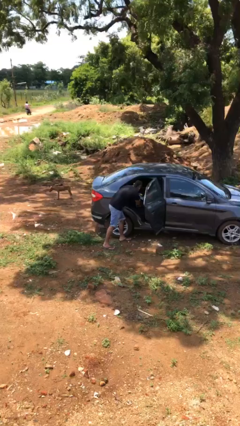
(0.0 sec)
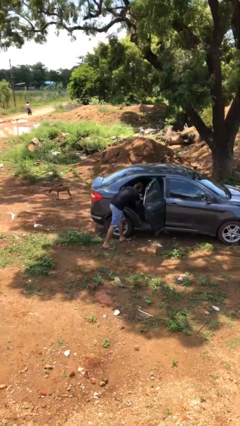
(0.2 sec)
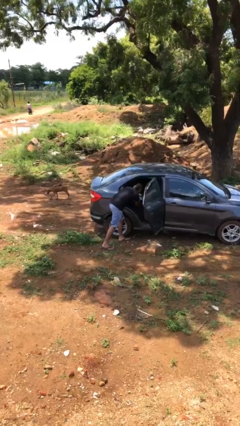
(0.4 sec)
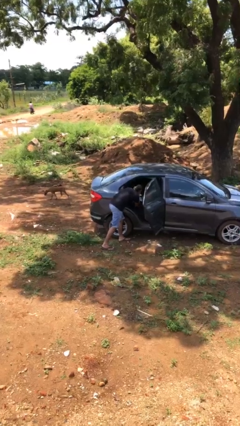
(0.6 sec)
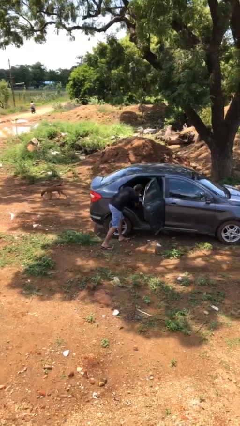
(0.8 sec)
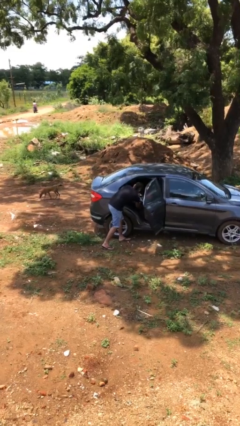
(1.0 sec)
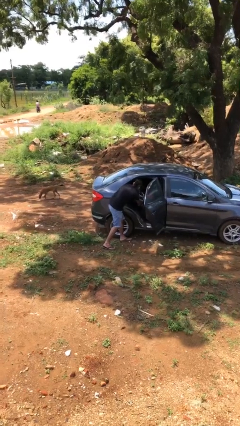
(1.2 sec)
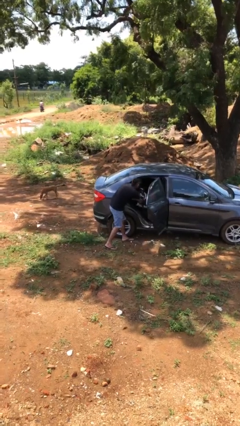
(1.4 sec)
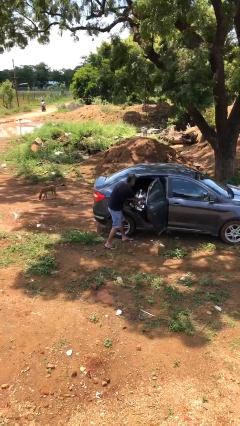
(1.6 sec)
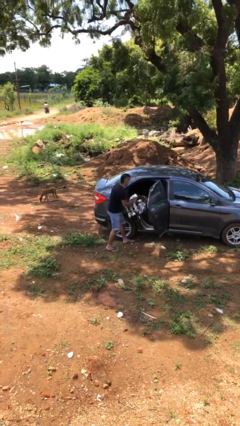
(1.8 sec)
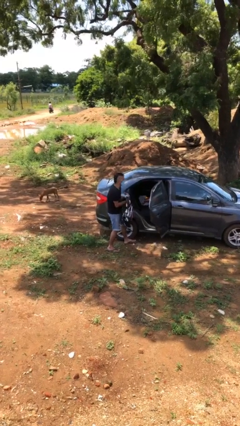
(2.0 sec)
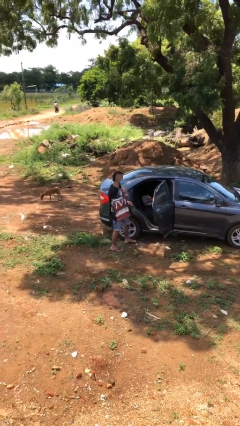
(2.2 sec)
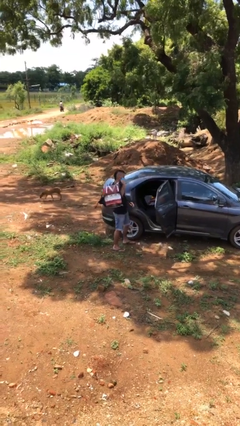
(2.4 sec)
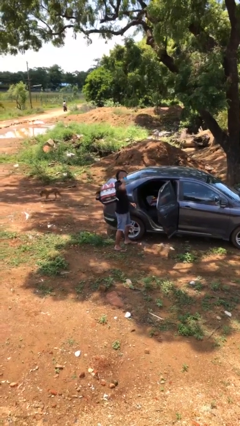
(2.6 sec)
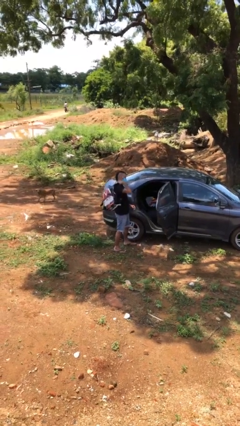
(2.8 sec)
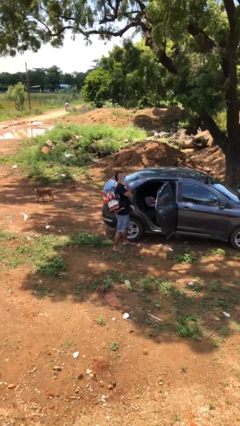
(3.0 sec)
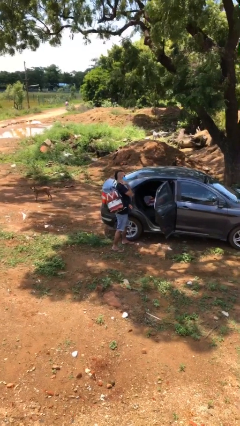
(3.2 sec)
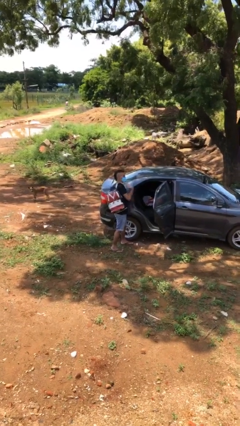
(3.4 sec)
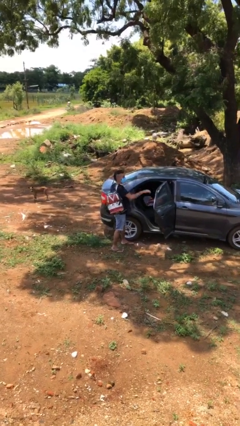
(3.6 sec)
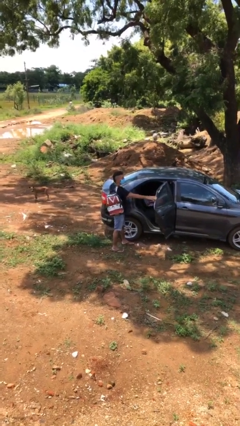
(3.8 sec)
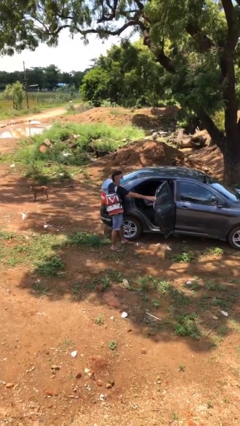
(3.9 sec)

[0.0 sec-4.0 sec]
person unloads car

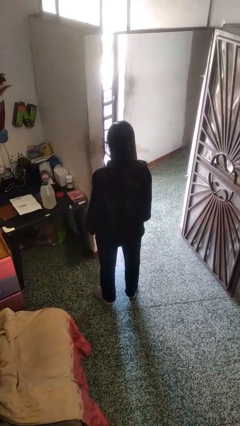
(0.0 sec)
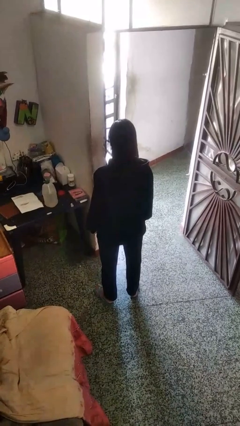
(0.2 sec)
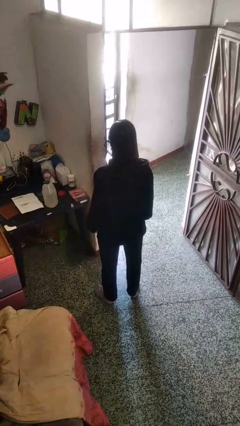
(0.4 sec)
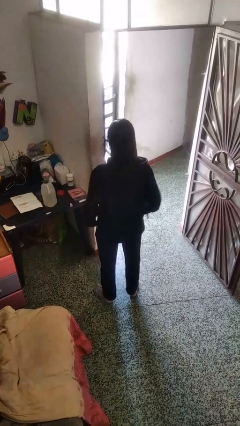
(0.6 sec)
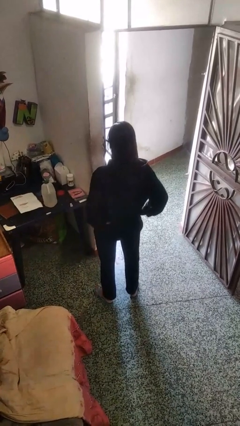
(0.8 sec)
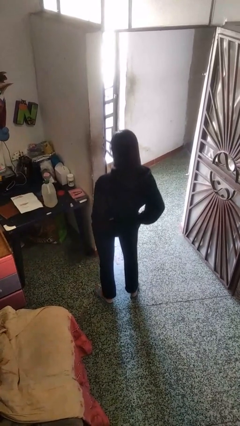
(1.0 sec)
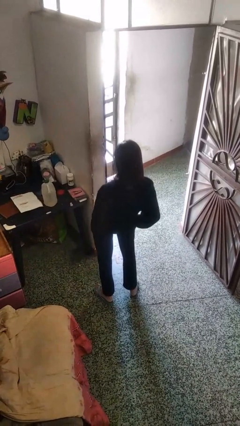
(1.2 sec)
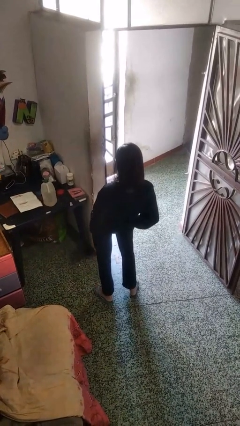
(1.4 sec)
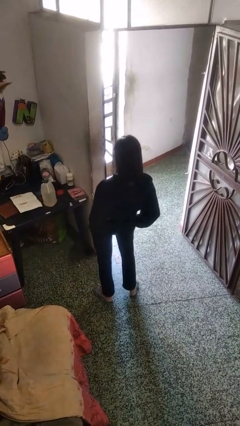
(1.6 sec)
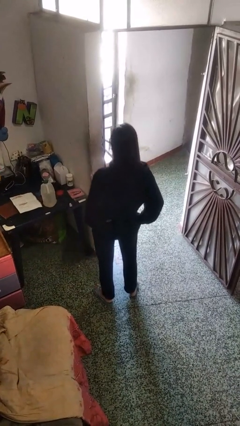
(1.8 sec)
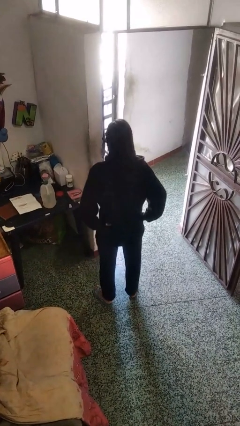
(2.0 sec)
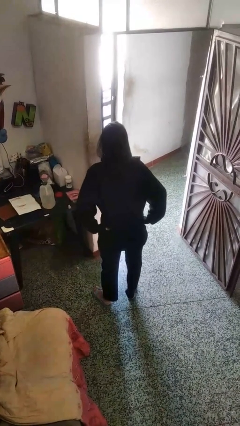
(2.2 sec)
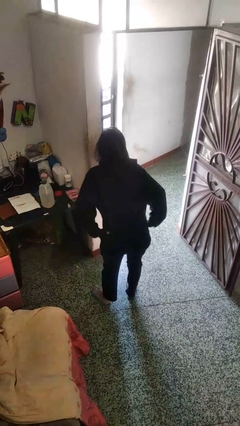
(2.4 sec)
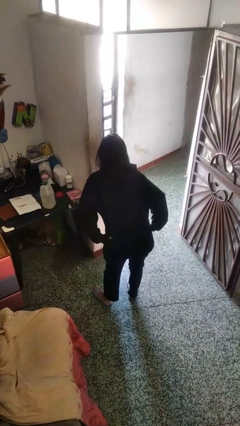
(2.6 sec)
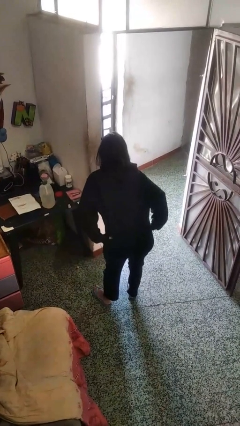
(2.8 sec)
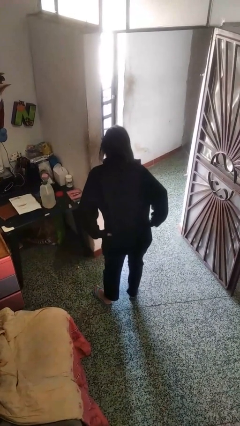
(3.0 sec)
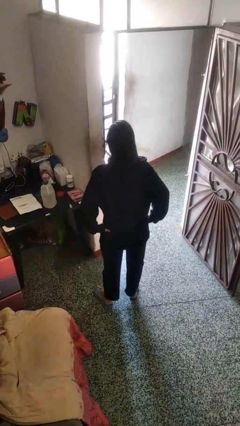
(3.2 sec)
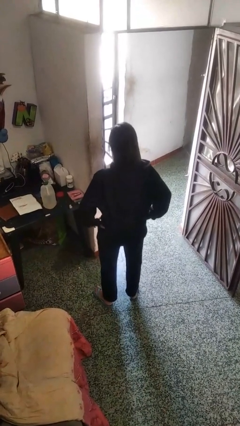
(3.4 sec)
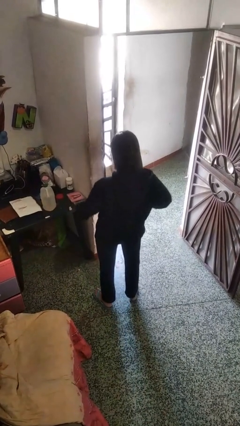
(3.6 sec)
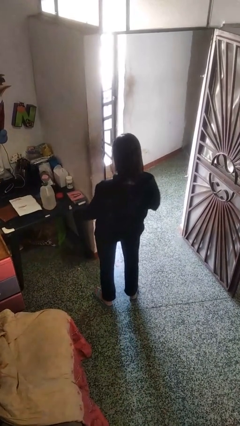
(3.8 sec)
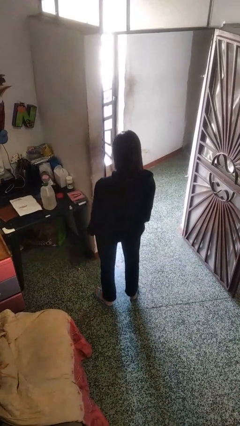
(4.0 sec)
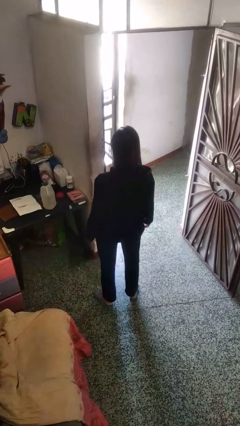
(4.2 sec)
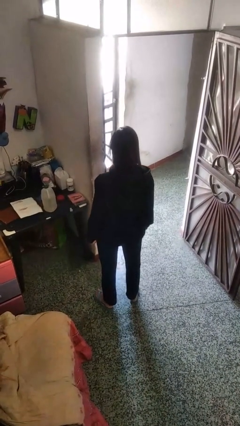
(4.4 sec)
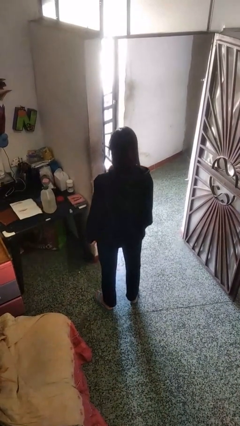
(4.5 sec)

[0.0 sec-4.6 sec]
person wiggles hips

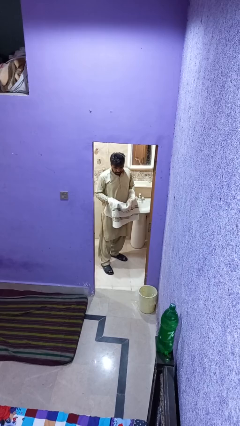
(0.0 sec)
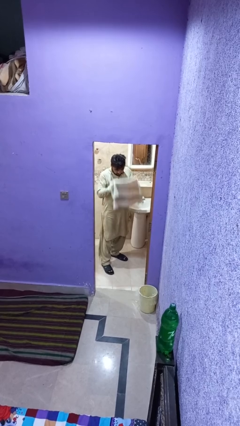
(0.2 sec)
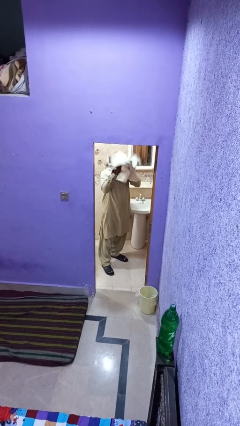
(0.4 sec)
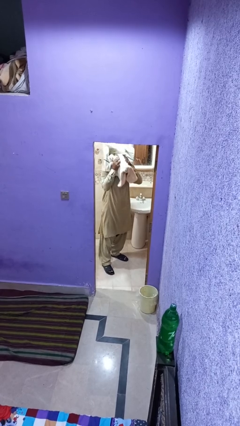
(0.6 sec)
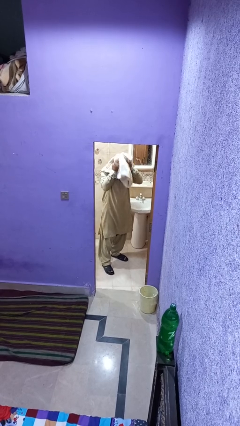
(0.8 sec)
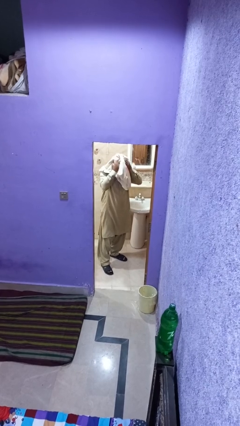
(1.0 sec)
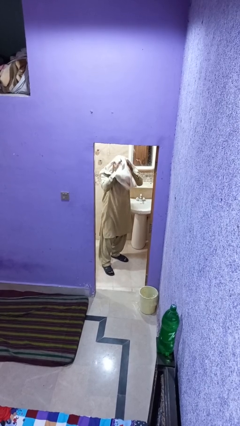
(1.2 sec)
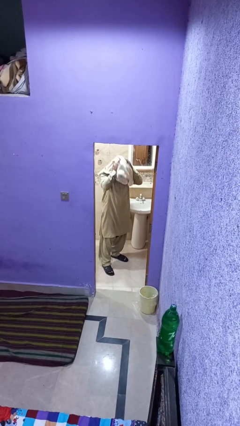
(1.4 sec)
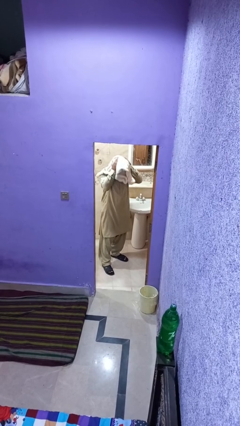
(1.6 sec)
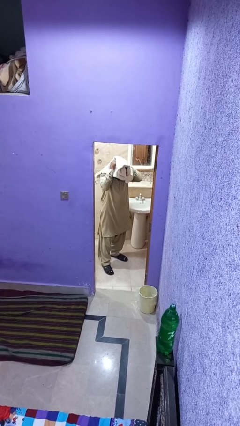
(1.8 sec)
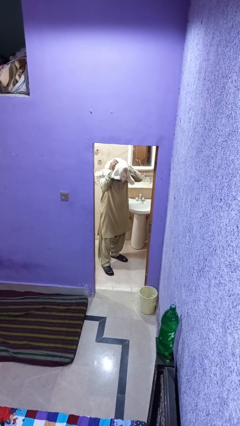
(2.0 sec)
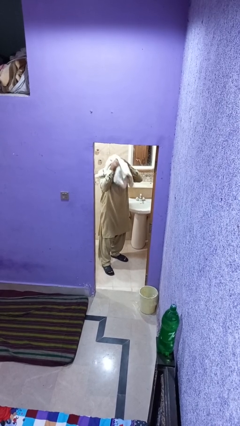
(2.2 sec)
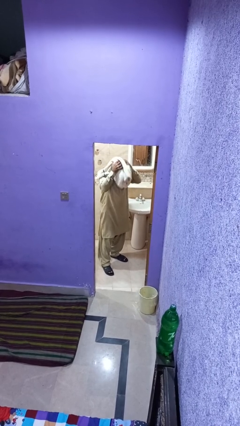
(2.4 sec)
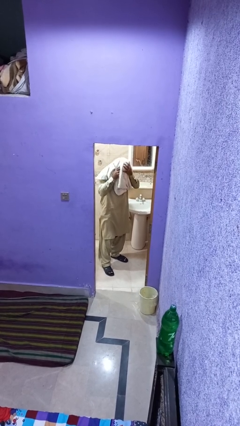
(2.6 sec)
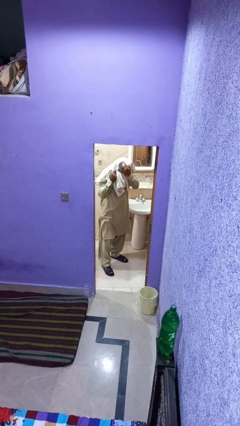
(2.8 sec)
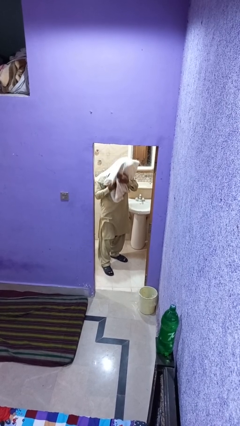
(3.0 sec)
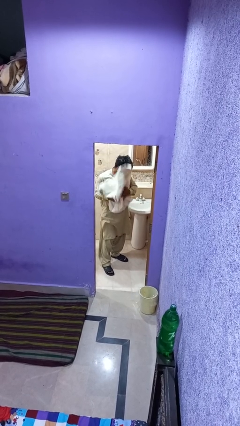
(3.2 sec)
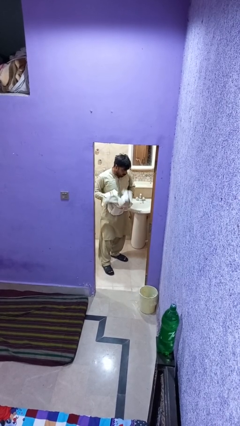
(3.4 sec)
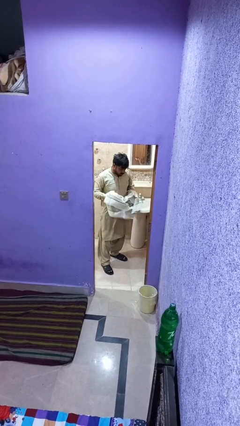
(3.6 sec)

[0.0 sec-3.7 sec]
person dries hair with towel

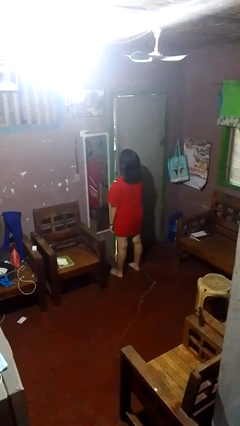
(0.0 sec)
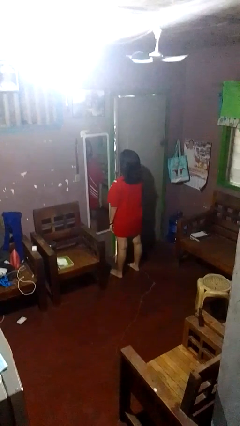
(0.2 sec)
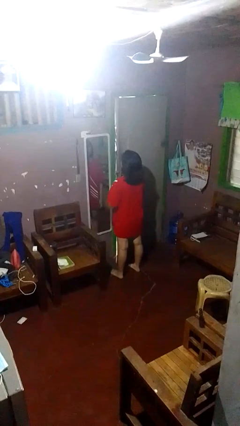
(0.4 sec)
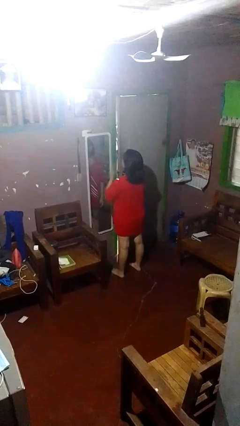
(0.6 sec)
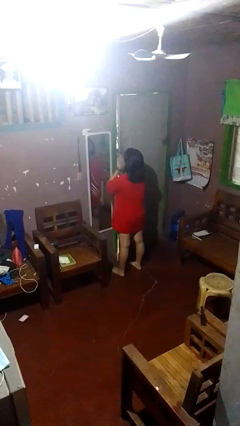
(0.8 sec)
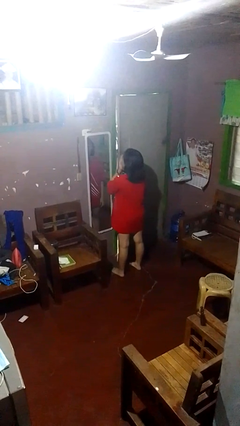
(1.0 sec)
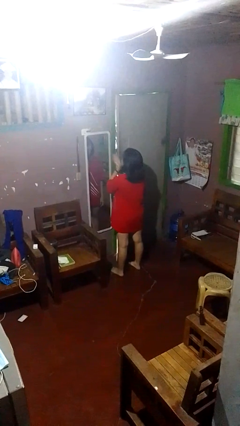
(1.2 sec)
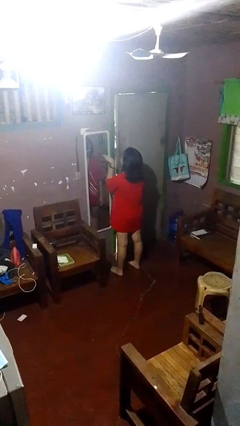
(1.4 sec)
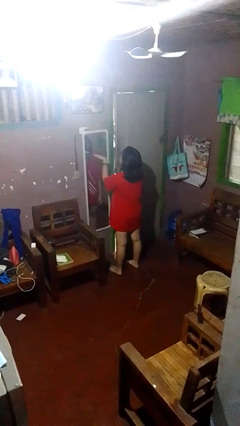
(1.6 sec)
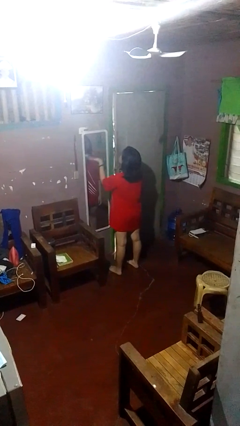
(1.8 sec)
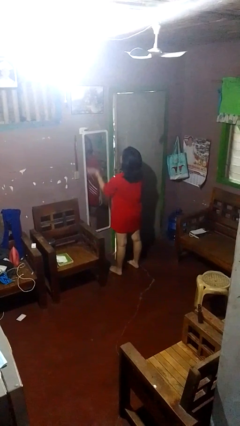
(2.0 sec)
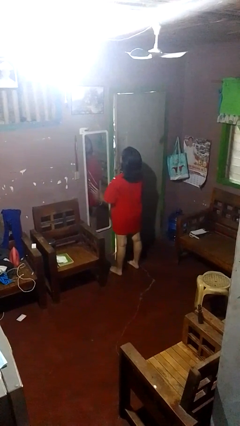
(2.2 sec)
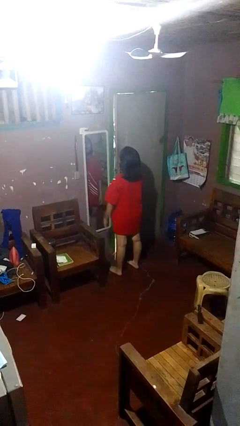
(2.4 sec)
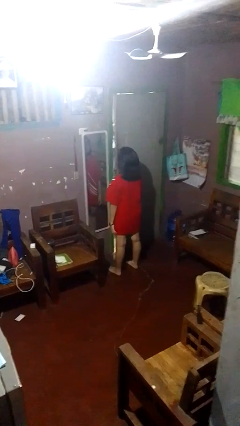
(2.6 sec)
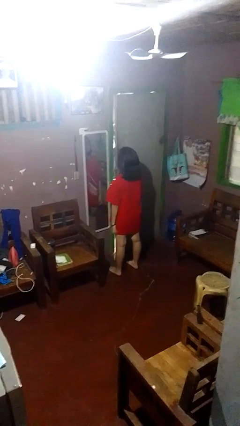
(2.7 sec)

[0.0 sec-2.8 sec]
person gestures blow kiss

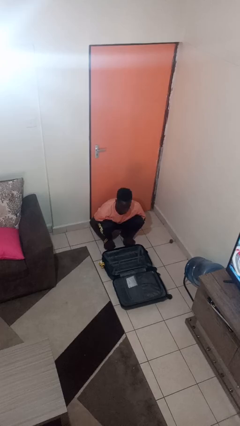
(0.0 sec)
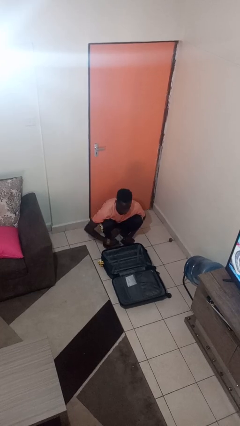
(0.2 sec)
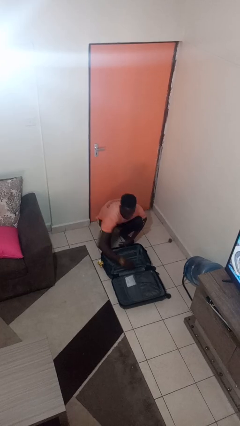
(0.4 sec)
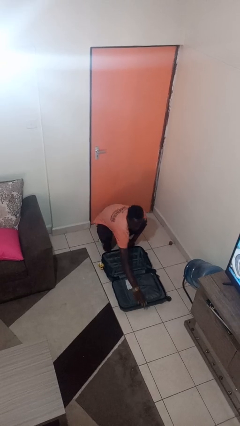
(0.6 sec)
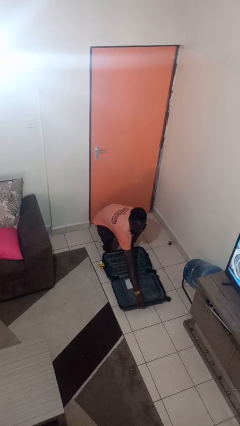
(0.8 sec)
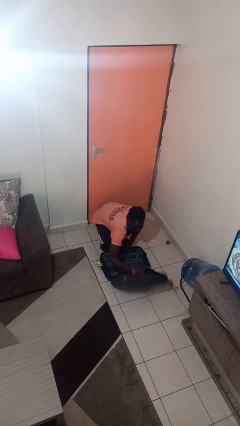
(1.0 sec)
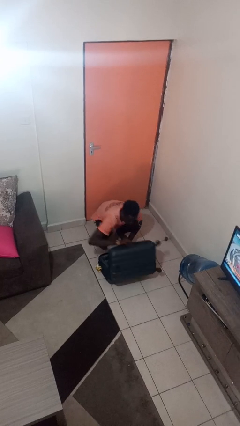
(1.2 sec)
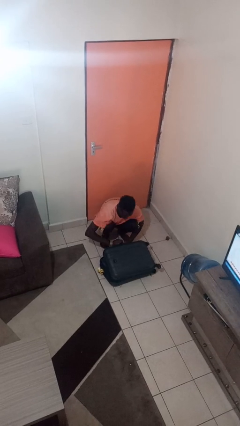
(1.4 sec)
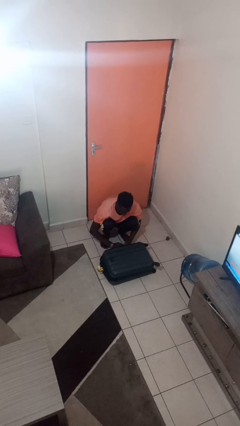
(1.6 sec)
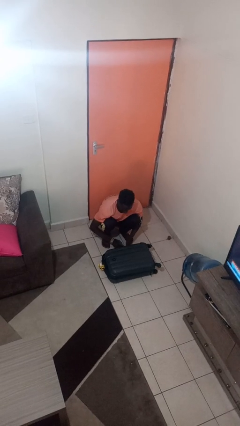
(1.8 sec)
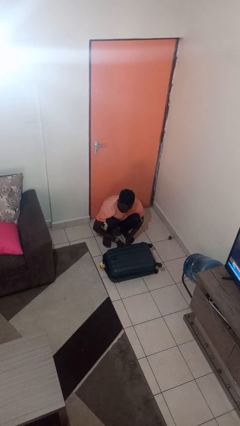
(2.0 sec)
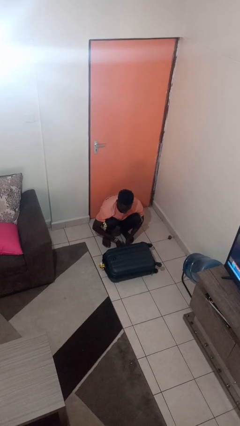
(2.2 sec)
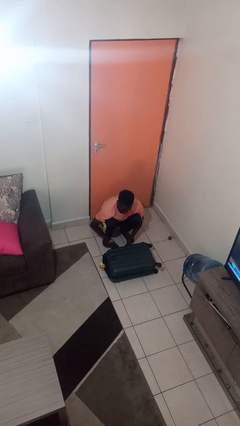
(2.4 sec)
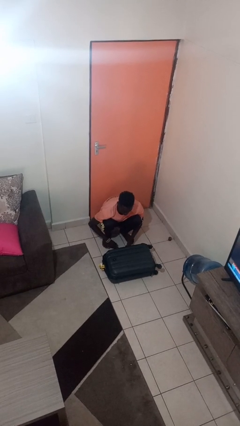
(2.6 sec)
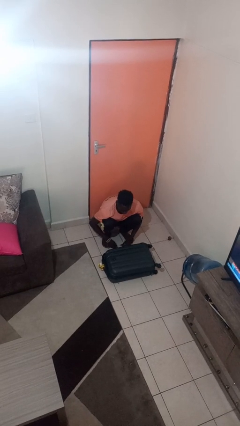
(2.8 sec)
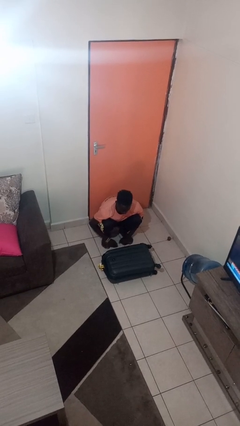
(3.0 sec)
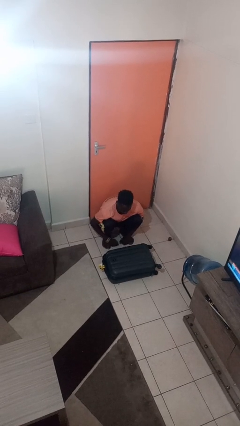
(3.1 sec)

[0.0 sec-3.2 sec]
person closes suitcase
